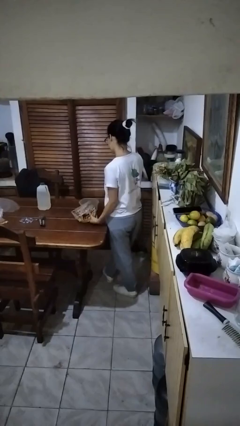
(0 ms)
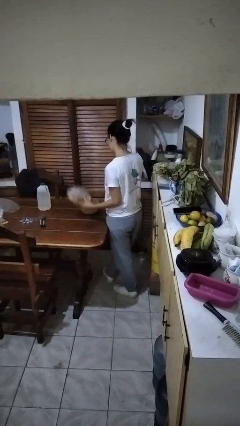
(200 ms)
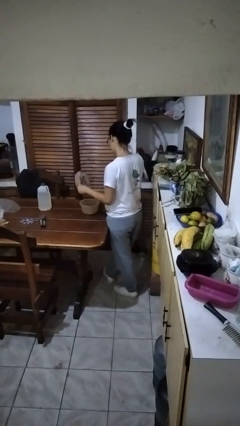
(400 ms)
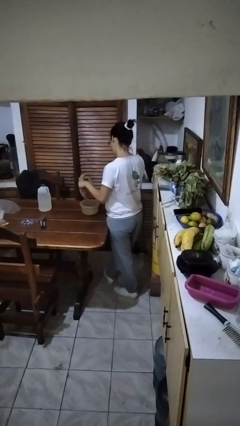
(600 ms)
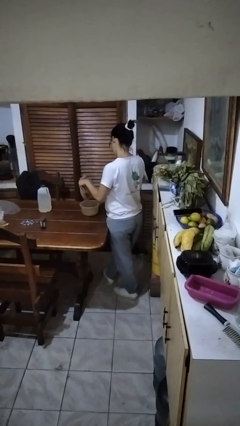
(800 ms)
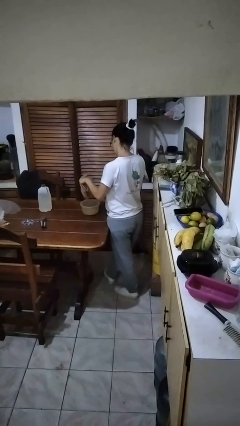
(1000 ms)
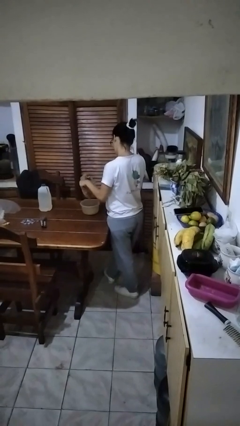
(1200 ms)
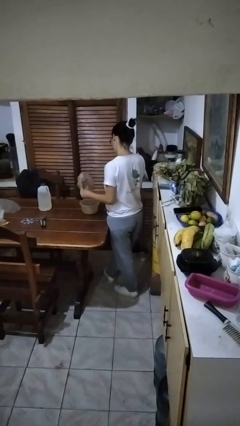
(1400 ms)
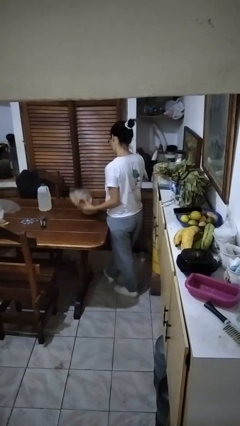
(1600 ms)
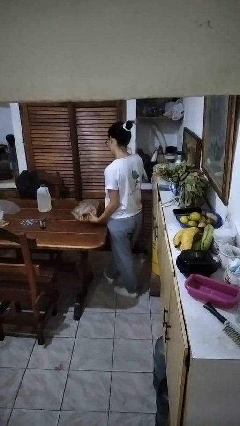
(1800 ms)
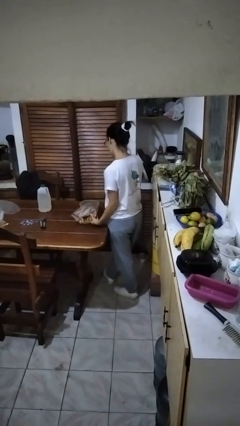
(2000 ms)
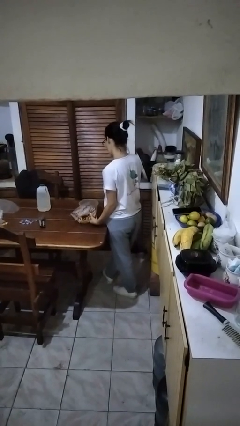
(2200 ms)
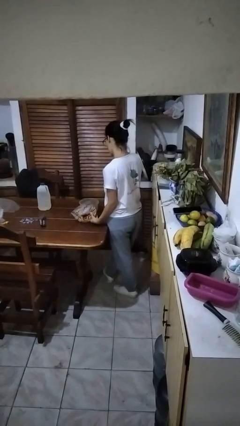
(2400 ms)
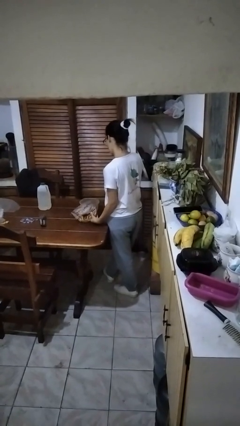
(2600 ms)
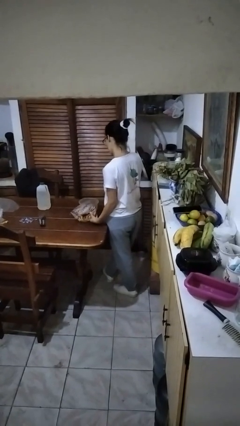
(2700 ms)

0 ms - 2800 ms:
person pours into bowl

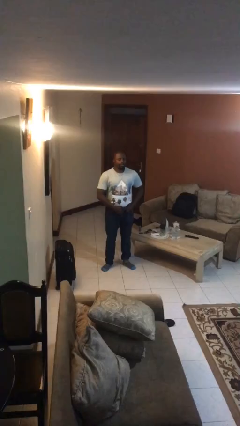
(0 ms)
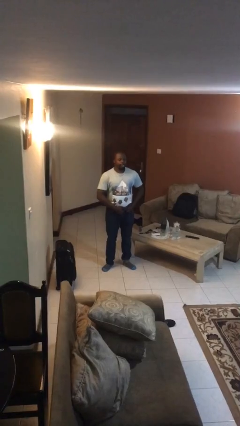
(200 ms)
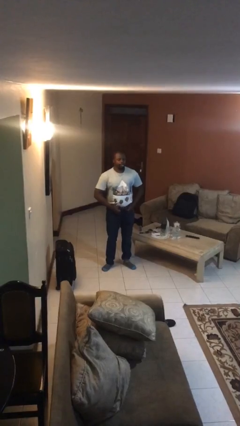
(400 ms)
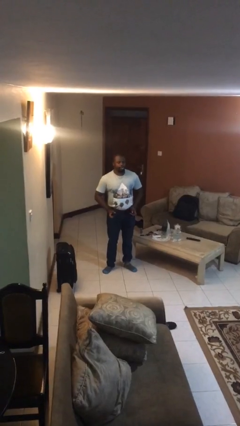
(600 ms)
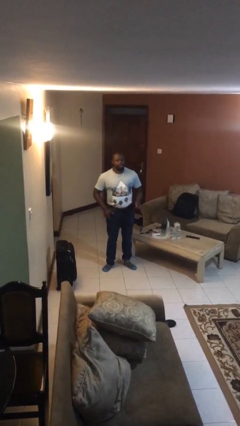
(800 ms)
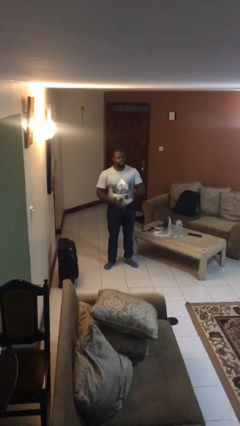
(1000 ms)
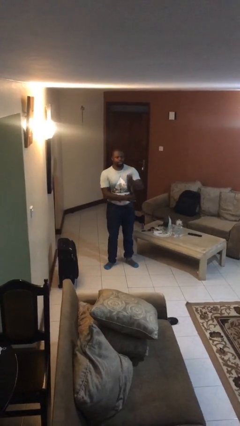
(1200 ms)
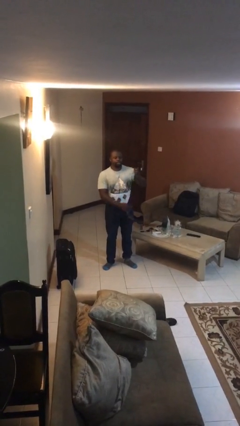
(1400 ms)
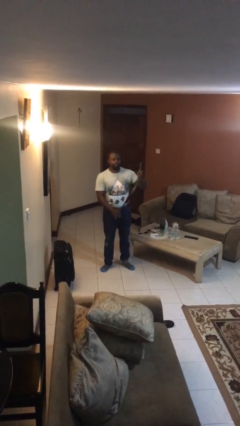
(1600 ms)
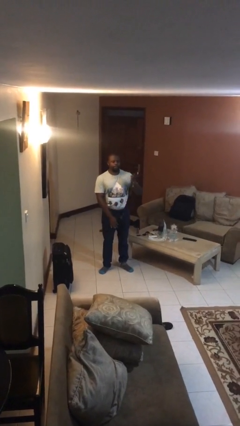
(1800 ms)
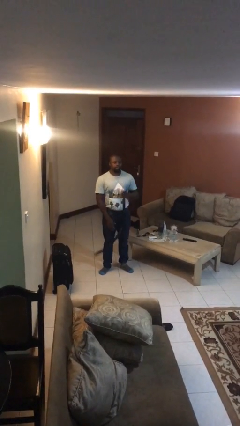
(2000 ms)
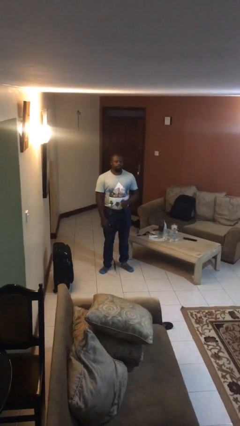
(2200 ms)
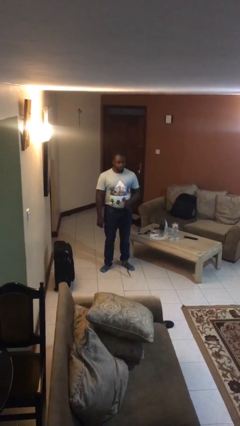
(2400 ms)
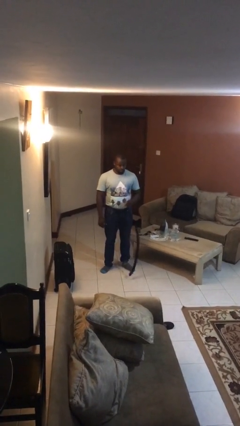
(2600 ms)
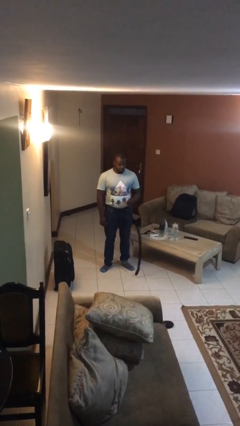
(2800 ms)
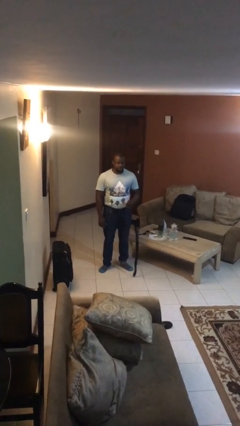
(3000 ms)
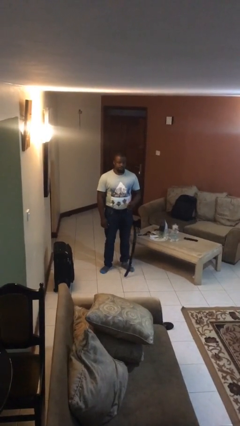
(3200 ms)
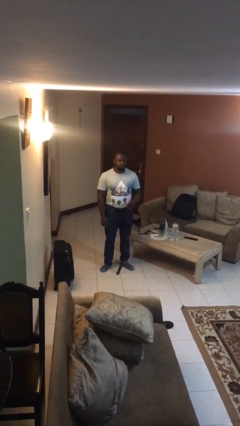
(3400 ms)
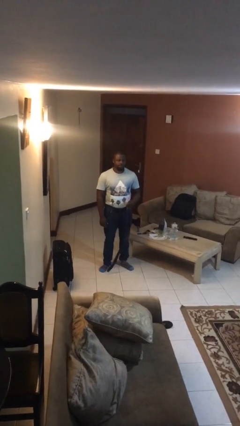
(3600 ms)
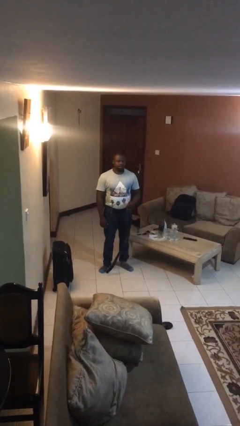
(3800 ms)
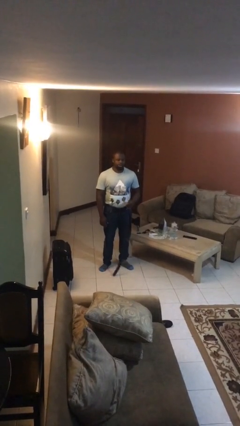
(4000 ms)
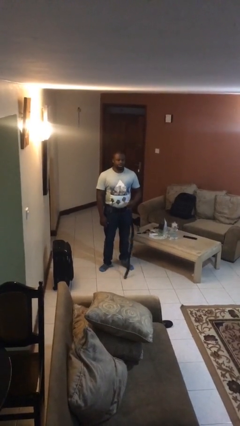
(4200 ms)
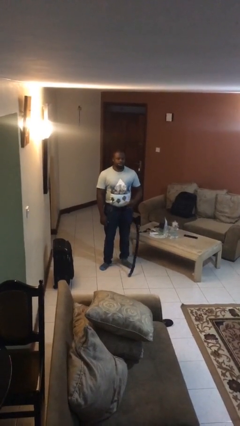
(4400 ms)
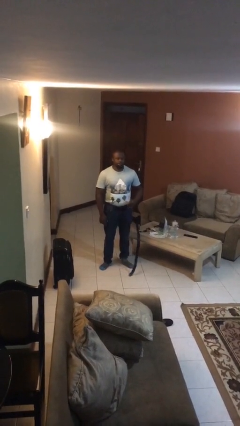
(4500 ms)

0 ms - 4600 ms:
person takes off belt

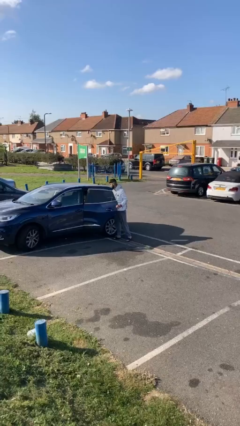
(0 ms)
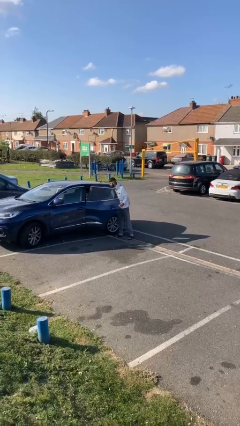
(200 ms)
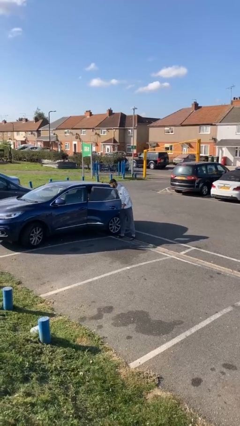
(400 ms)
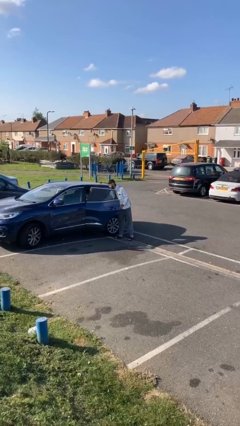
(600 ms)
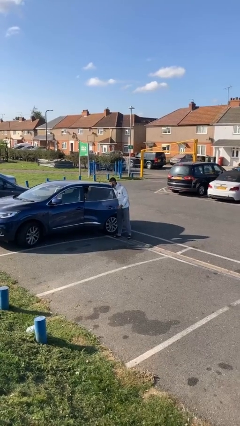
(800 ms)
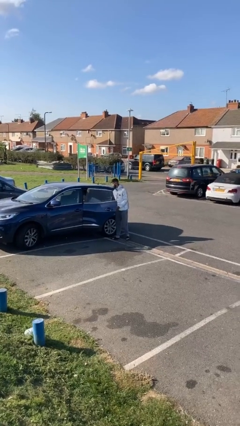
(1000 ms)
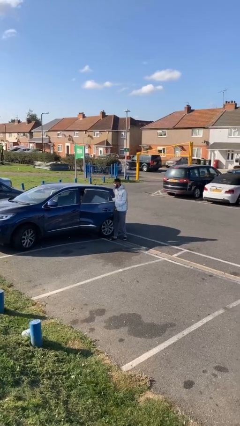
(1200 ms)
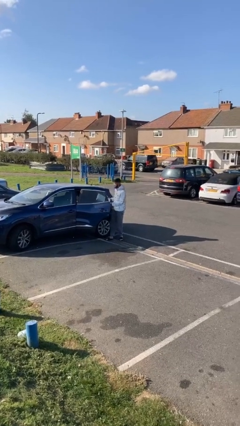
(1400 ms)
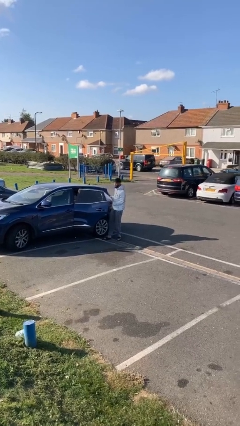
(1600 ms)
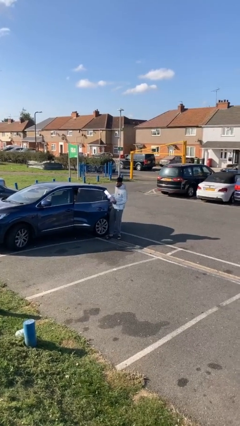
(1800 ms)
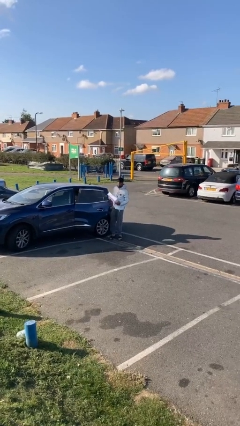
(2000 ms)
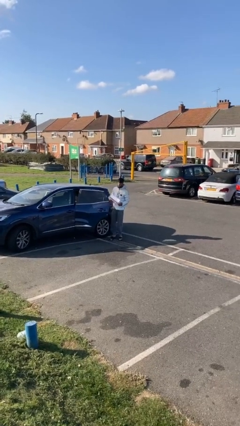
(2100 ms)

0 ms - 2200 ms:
person unloads car

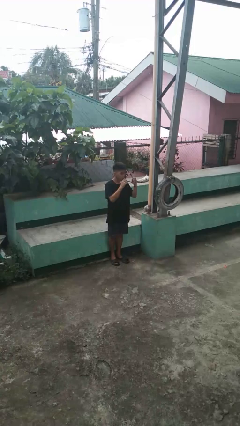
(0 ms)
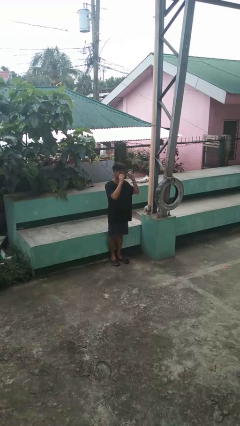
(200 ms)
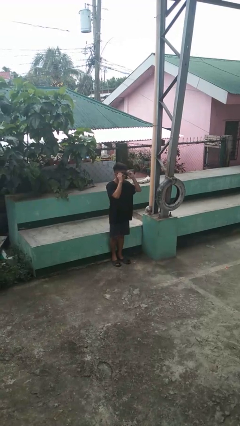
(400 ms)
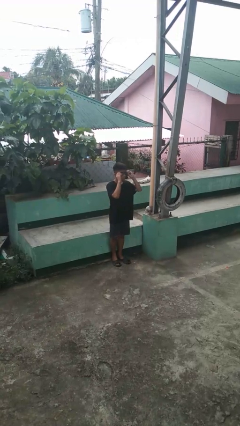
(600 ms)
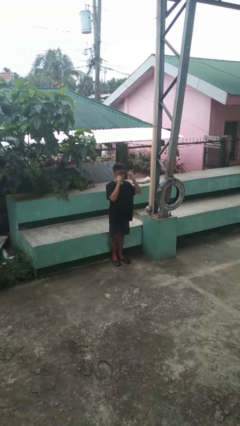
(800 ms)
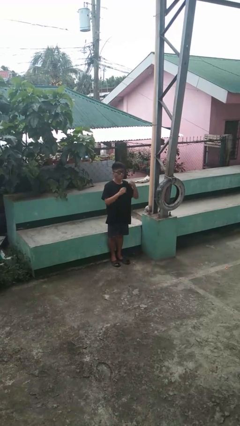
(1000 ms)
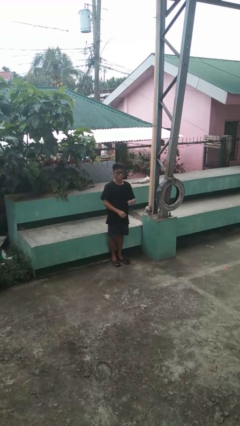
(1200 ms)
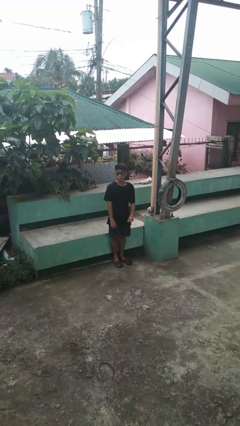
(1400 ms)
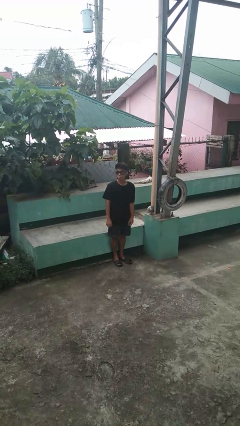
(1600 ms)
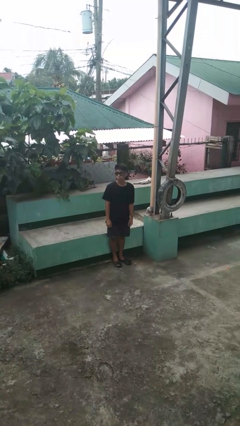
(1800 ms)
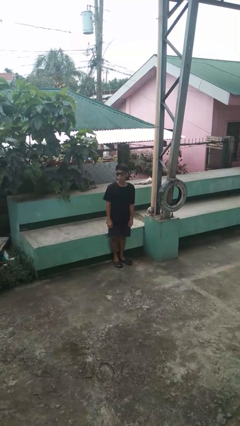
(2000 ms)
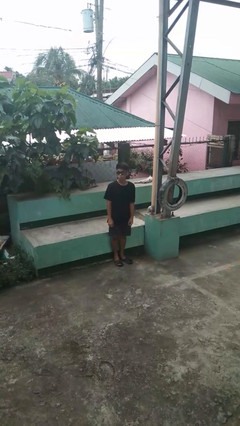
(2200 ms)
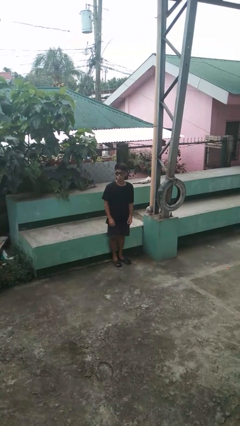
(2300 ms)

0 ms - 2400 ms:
person puts on sunglasses

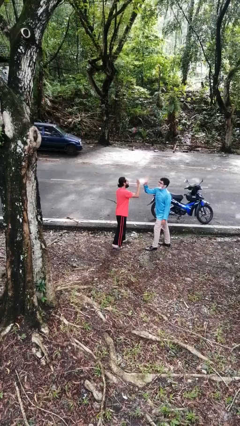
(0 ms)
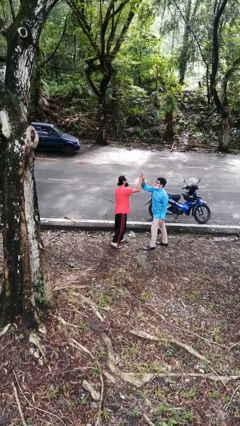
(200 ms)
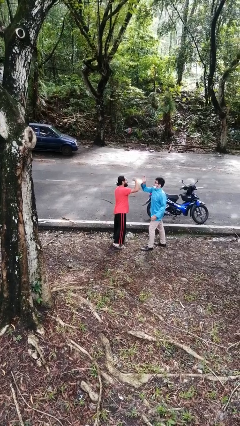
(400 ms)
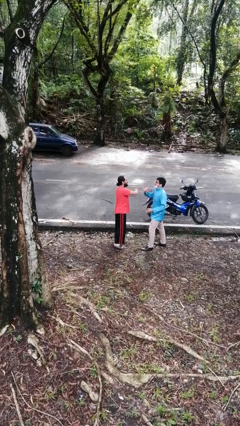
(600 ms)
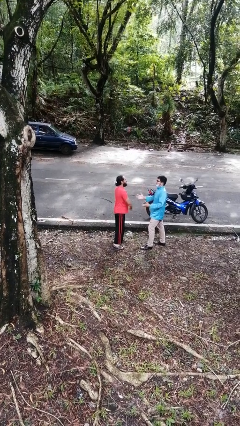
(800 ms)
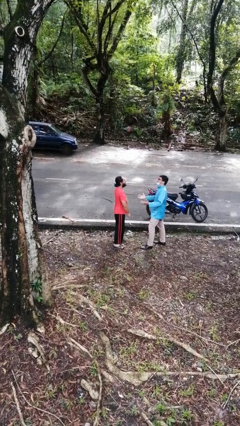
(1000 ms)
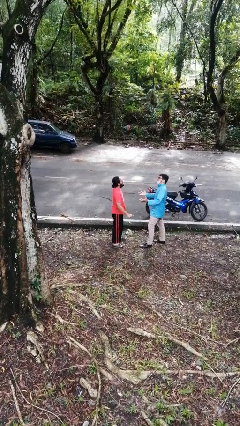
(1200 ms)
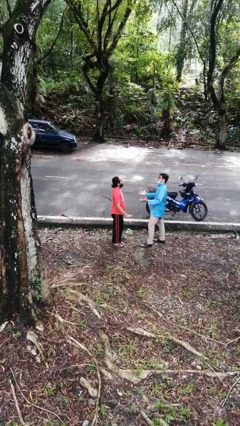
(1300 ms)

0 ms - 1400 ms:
person highfives hand

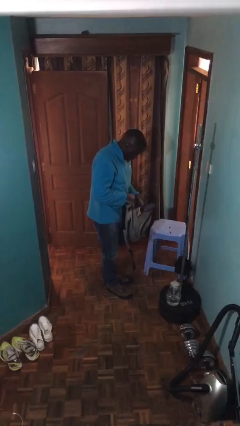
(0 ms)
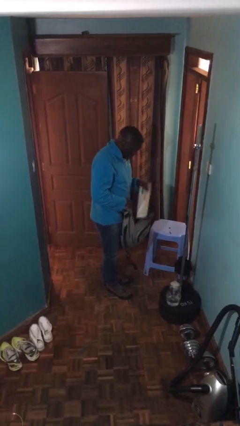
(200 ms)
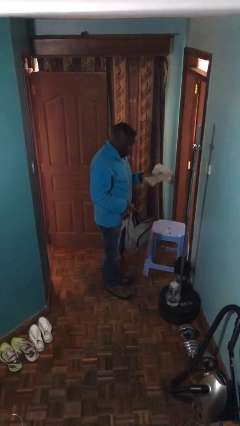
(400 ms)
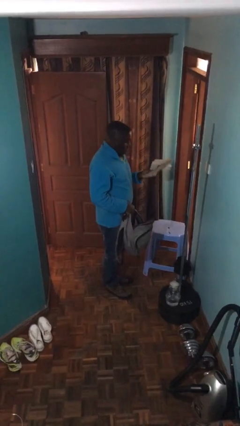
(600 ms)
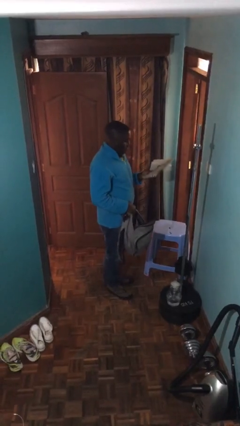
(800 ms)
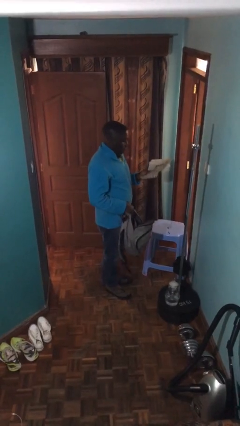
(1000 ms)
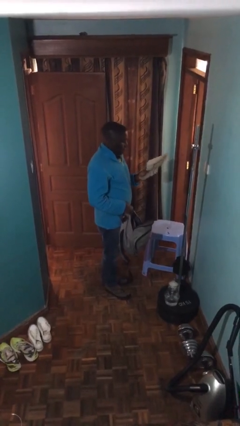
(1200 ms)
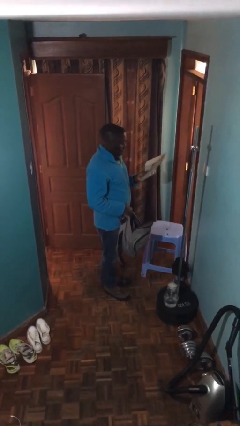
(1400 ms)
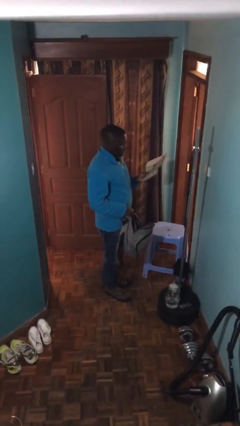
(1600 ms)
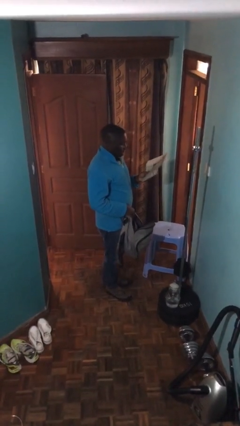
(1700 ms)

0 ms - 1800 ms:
person takes object from backpack

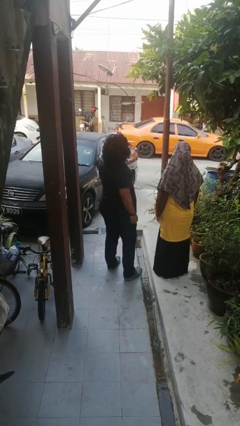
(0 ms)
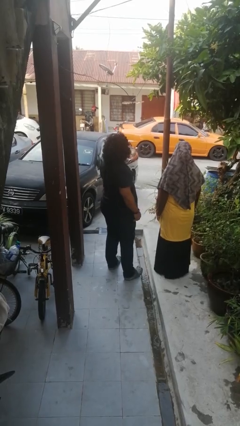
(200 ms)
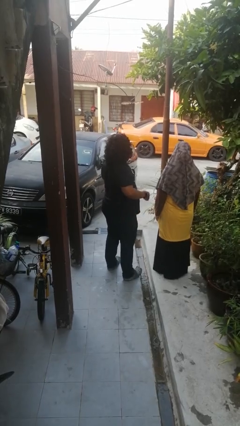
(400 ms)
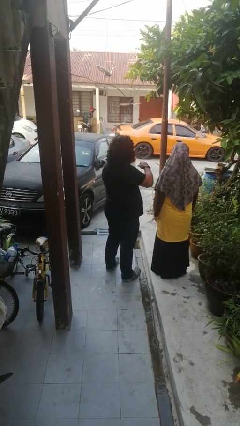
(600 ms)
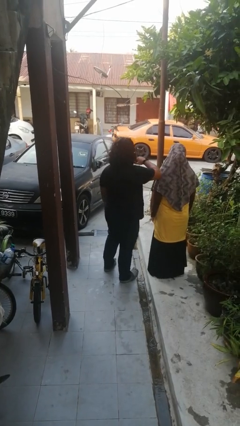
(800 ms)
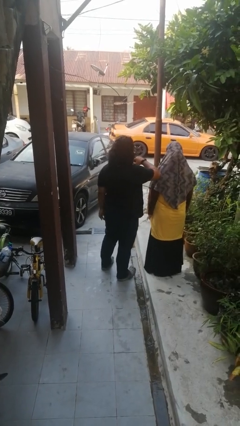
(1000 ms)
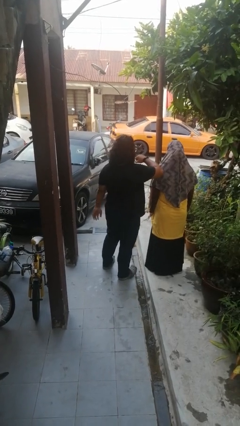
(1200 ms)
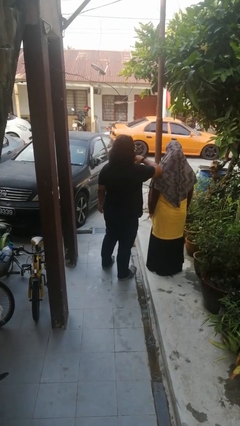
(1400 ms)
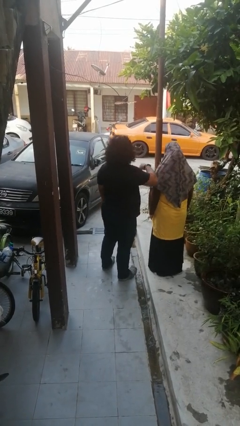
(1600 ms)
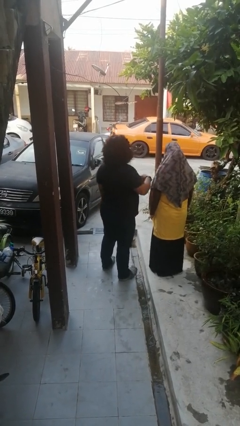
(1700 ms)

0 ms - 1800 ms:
person nudges person with elbow
